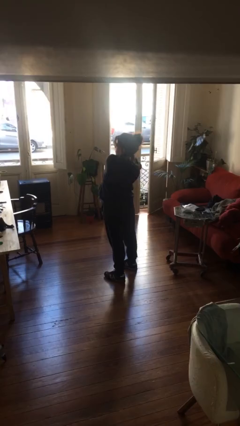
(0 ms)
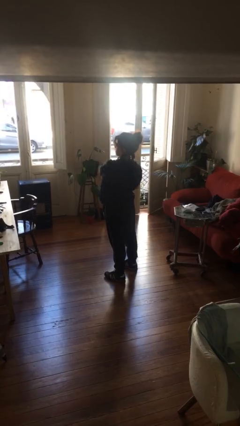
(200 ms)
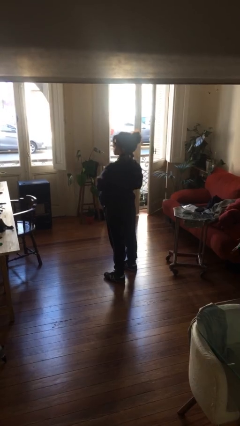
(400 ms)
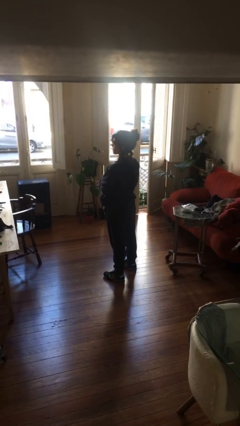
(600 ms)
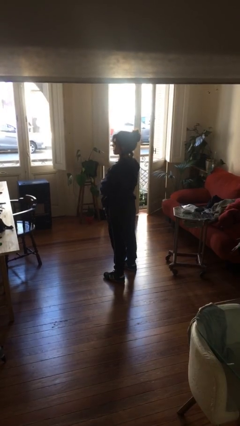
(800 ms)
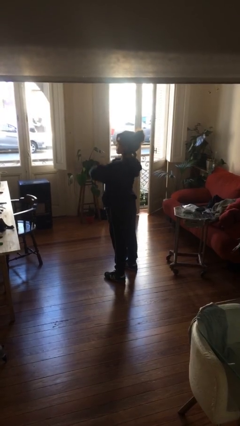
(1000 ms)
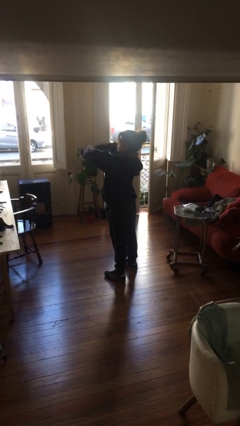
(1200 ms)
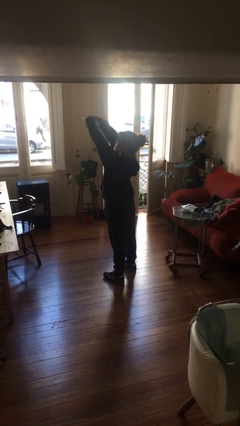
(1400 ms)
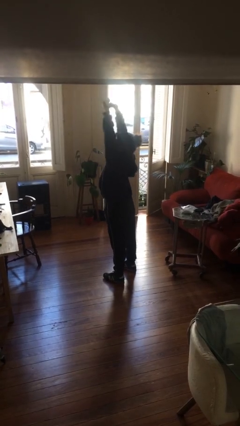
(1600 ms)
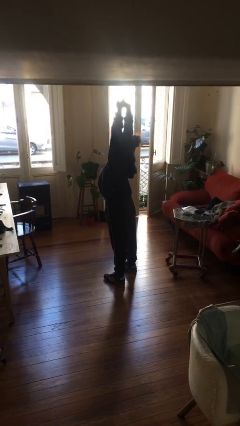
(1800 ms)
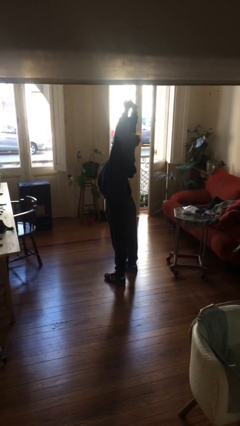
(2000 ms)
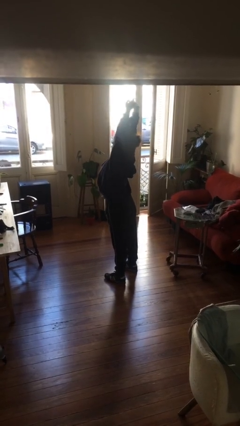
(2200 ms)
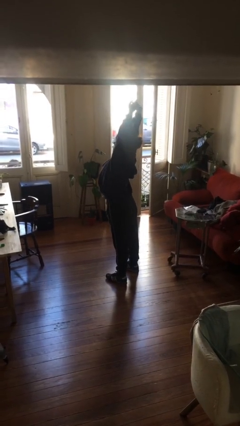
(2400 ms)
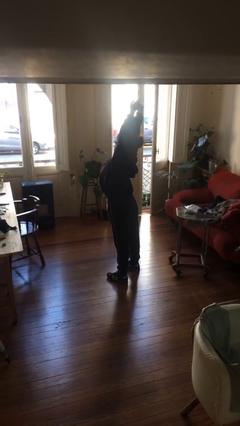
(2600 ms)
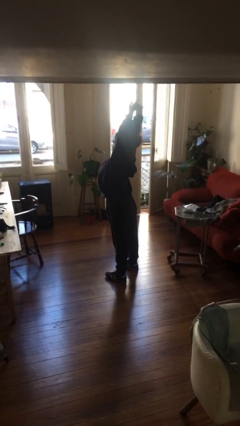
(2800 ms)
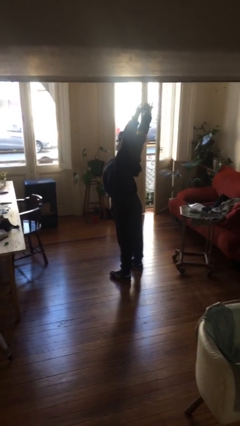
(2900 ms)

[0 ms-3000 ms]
person stretches arms over head

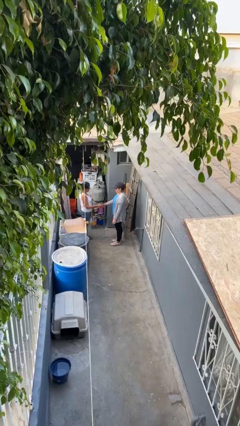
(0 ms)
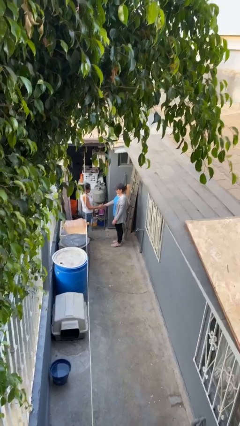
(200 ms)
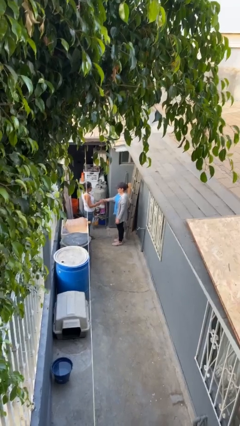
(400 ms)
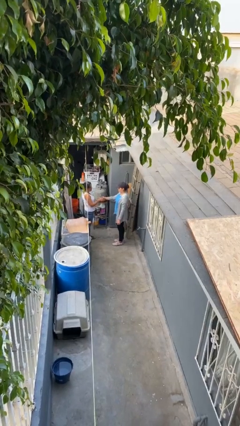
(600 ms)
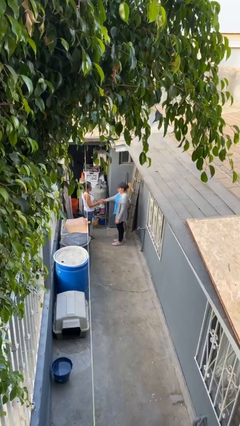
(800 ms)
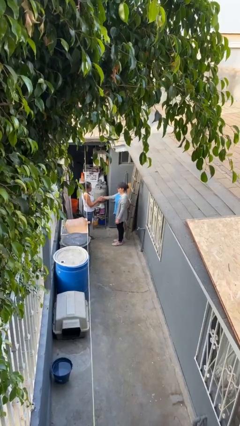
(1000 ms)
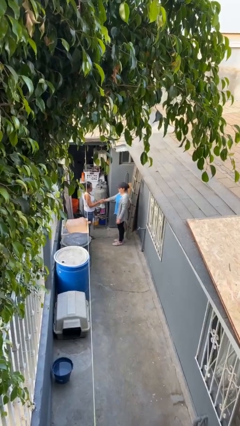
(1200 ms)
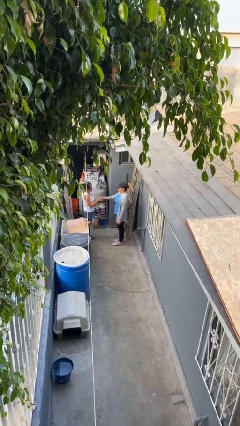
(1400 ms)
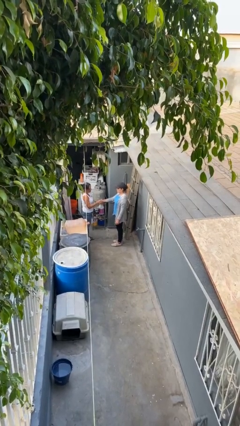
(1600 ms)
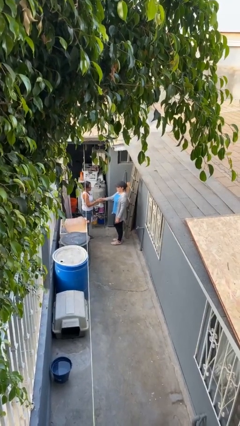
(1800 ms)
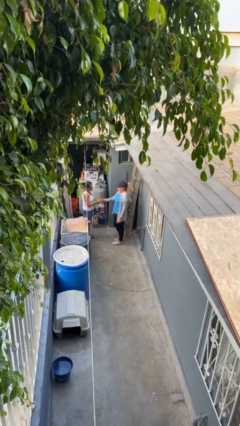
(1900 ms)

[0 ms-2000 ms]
person shakes hand

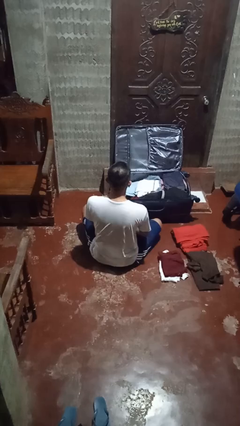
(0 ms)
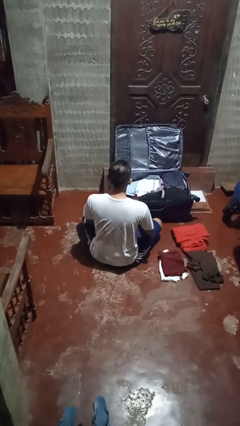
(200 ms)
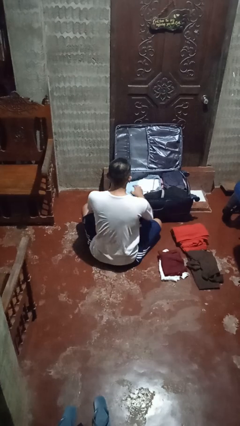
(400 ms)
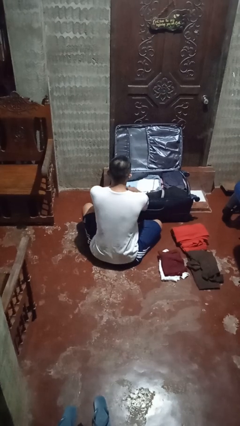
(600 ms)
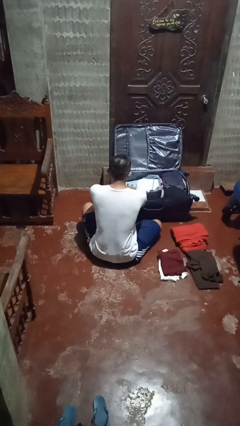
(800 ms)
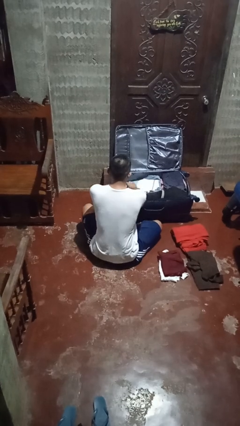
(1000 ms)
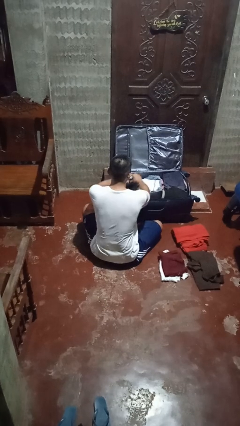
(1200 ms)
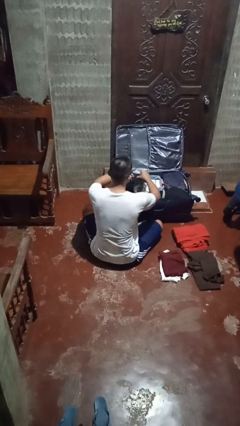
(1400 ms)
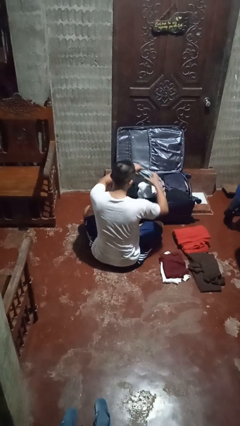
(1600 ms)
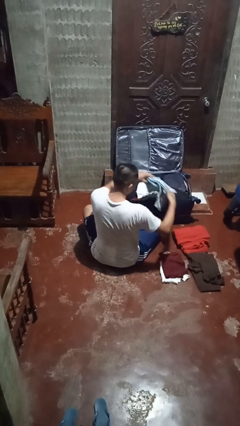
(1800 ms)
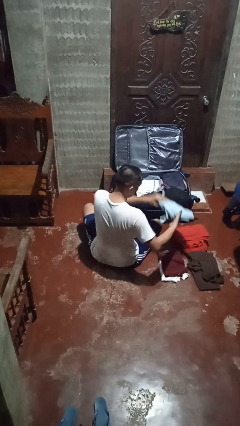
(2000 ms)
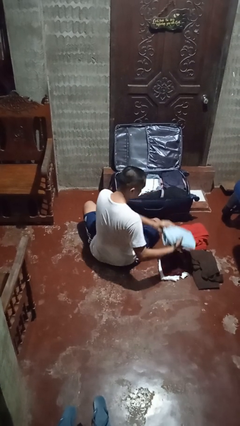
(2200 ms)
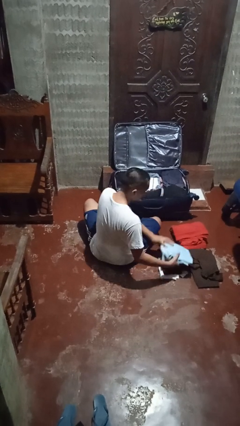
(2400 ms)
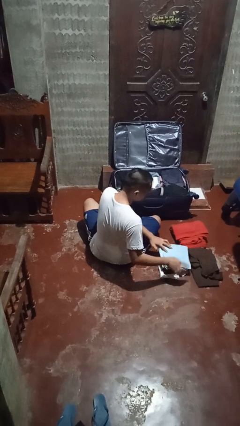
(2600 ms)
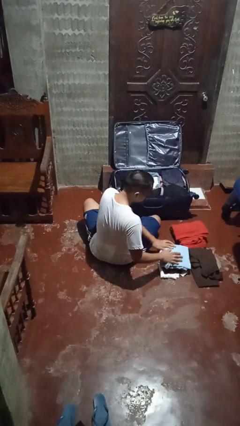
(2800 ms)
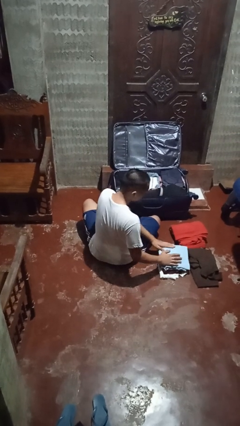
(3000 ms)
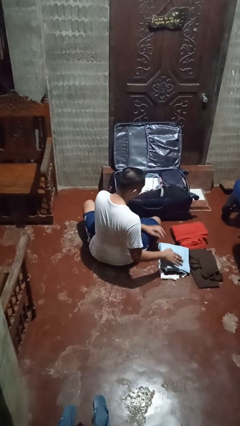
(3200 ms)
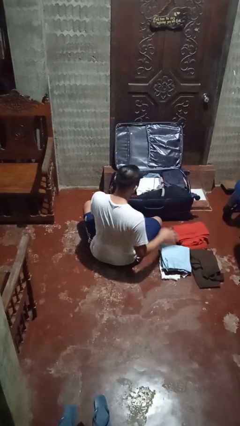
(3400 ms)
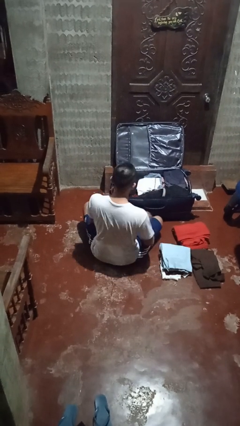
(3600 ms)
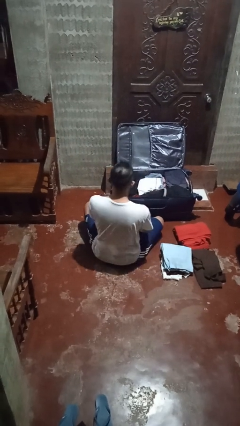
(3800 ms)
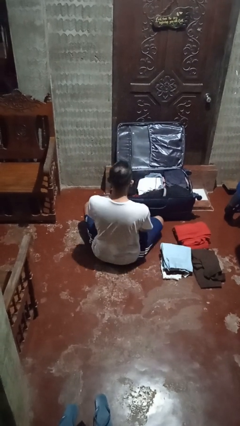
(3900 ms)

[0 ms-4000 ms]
person unloads clothes from suitcase

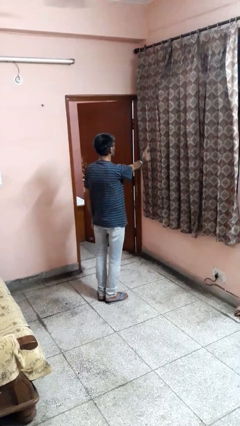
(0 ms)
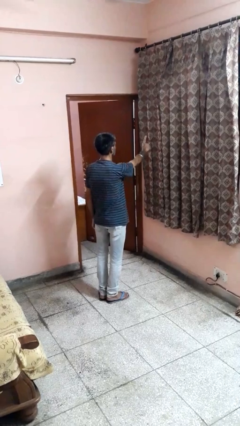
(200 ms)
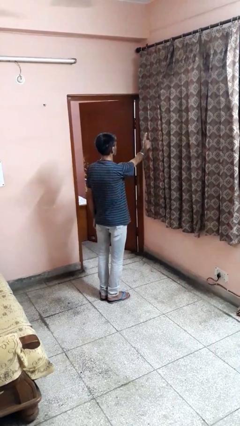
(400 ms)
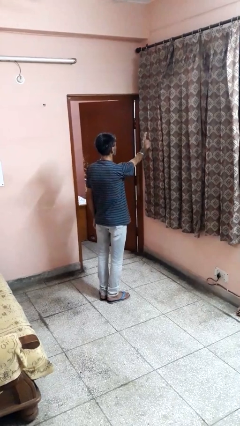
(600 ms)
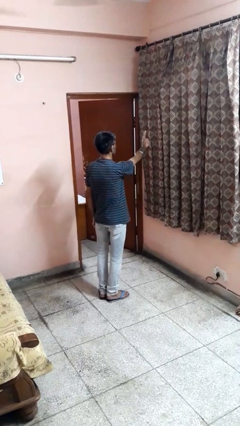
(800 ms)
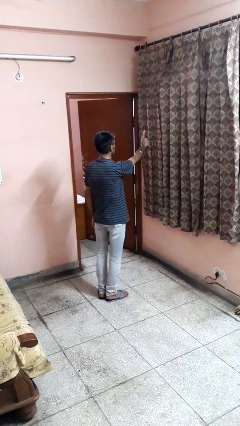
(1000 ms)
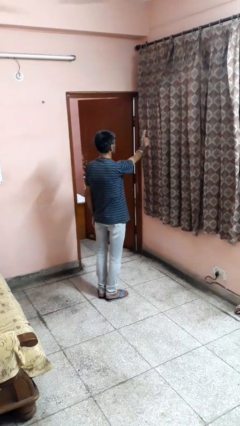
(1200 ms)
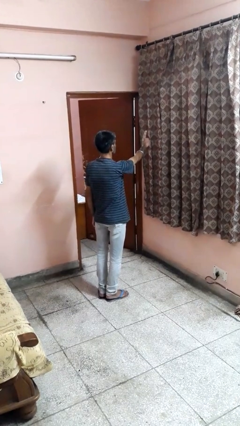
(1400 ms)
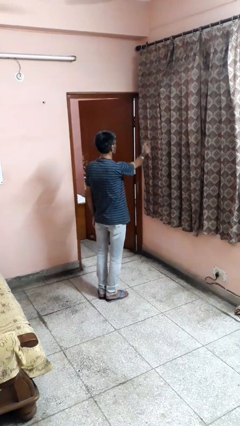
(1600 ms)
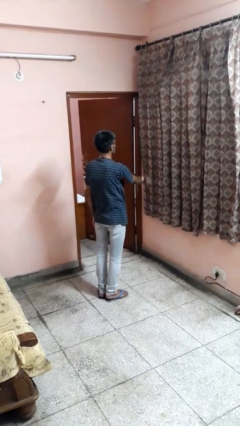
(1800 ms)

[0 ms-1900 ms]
person gestures number one

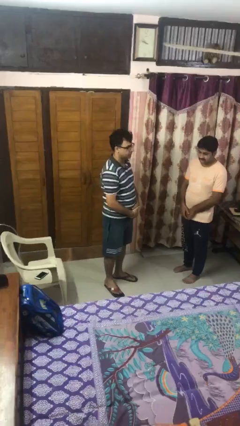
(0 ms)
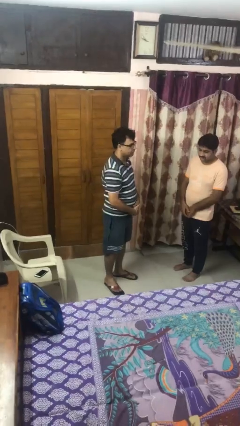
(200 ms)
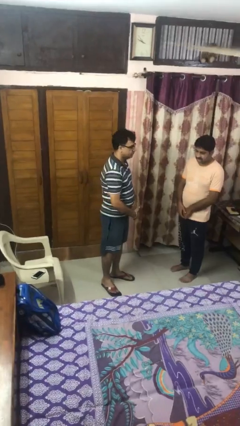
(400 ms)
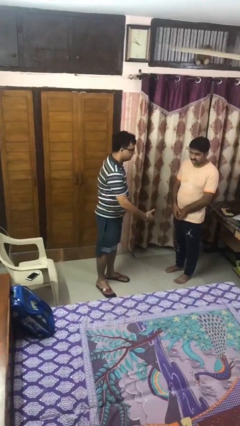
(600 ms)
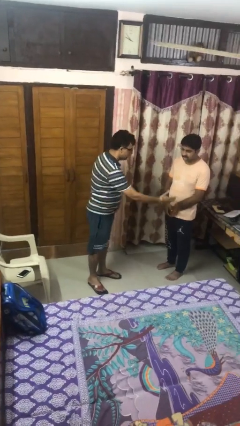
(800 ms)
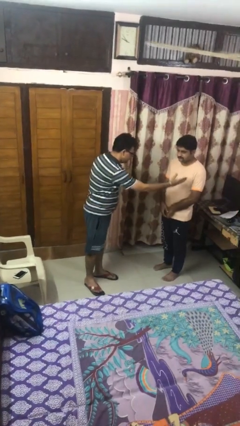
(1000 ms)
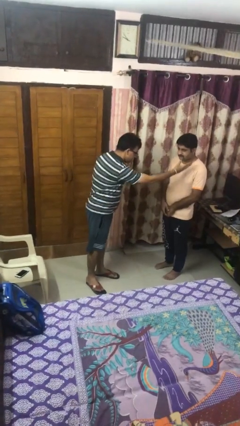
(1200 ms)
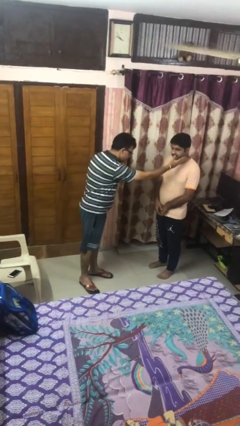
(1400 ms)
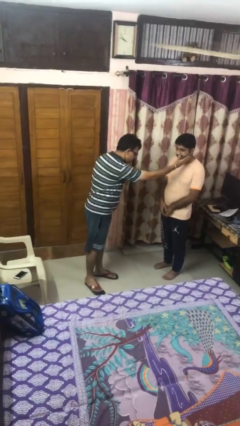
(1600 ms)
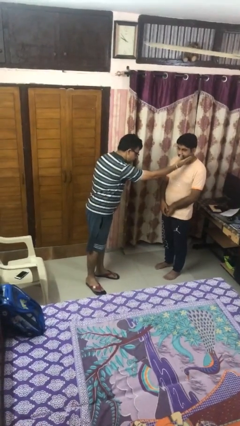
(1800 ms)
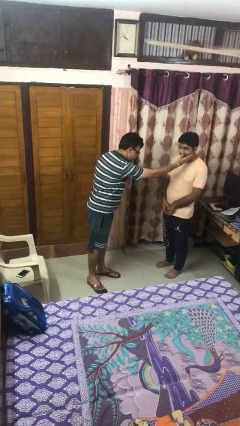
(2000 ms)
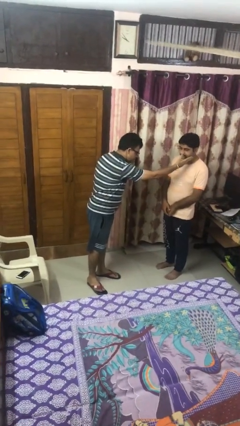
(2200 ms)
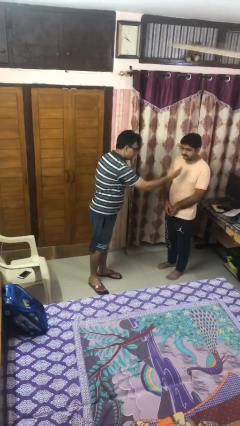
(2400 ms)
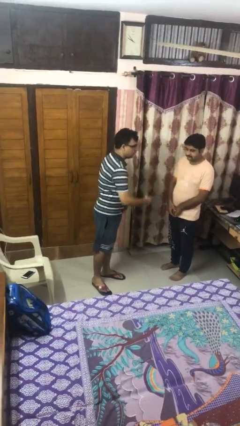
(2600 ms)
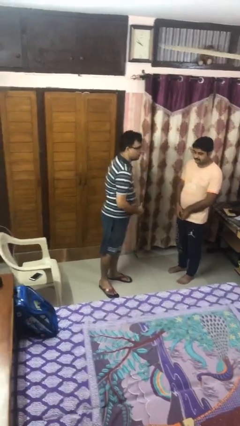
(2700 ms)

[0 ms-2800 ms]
person touches face of person

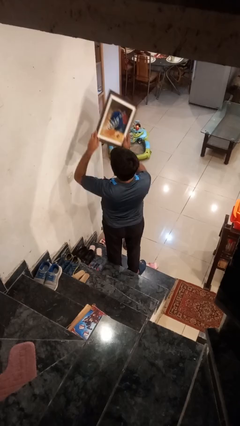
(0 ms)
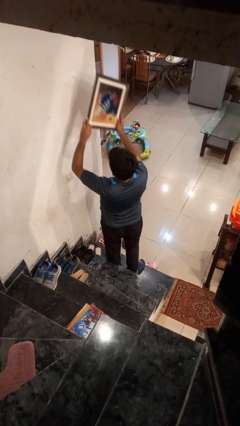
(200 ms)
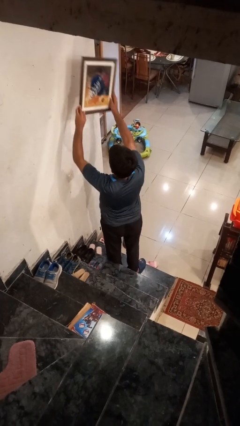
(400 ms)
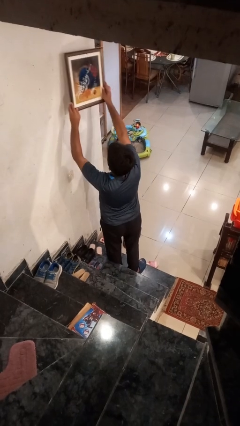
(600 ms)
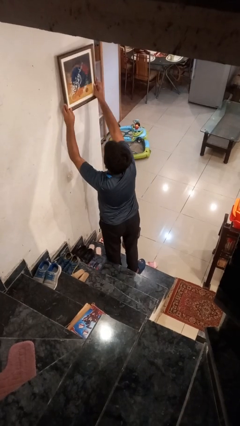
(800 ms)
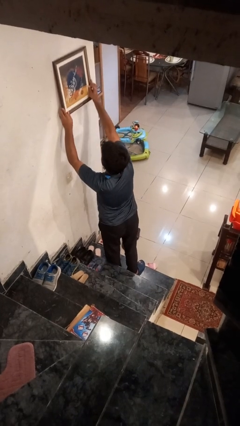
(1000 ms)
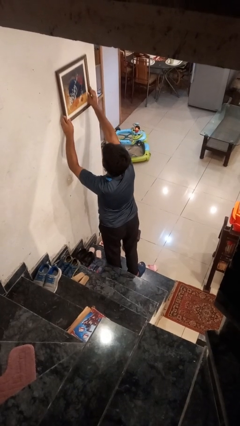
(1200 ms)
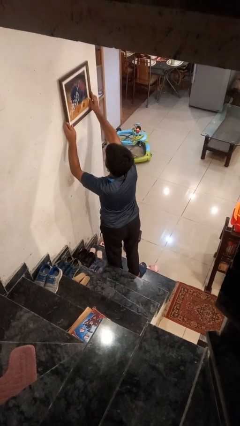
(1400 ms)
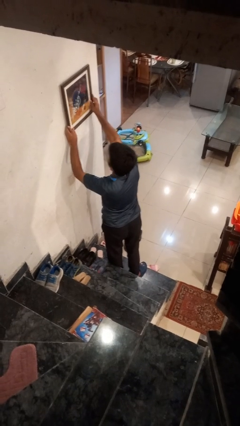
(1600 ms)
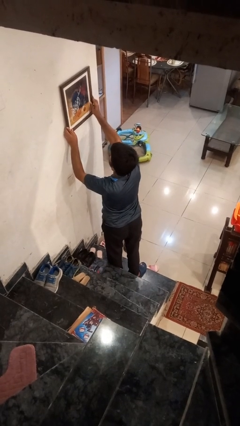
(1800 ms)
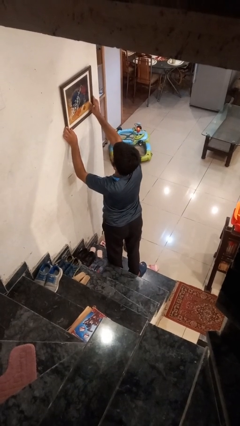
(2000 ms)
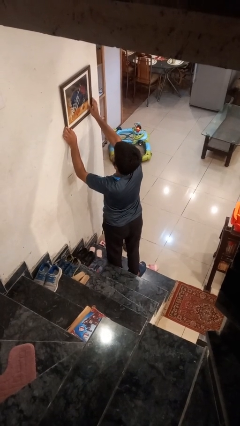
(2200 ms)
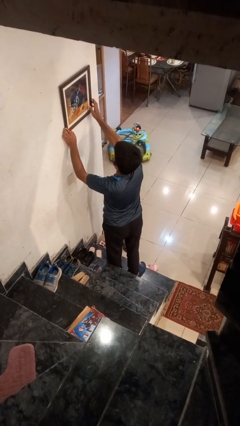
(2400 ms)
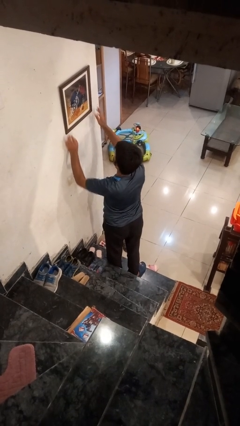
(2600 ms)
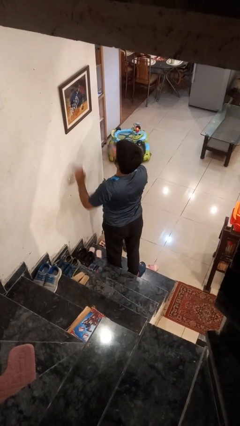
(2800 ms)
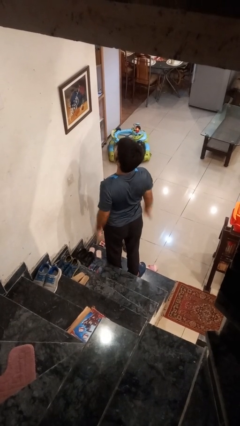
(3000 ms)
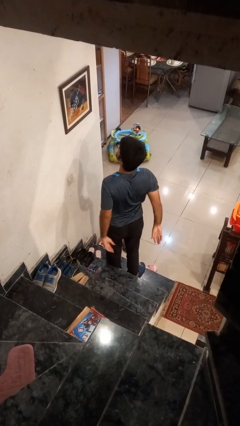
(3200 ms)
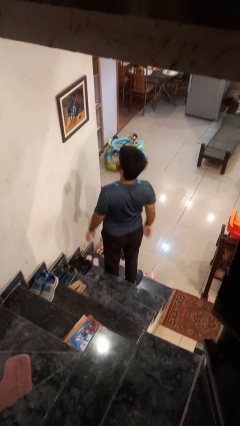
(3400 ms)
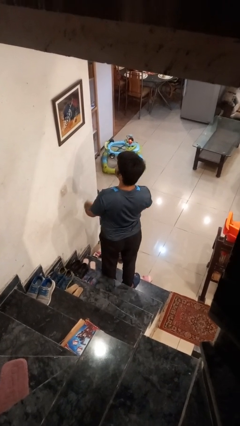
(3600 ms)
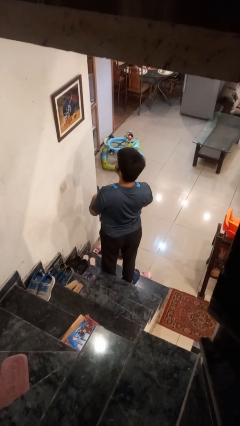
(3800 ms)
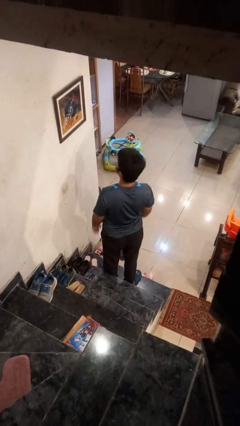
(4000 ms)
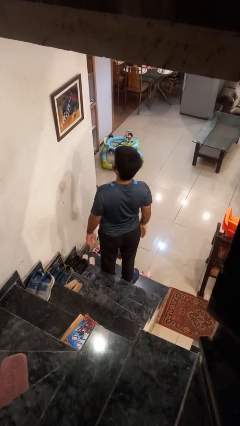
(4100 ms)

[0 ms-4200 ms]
person puts up picture frame
